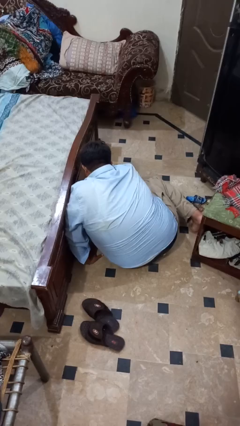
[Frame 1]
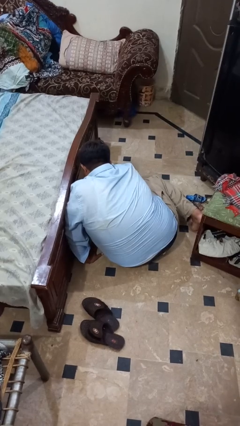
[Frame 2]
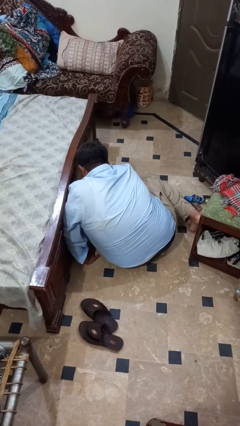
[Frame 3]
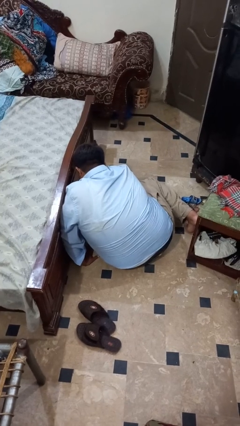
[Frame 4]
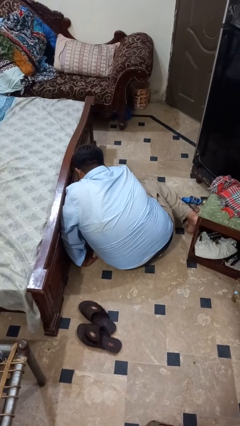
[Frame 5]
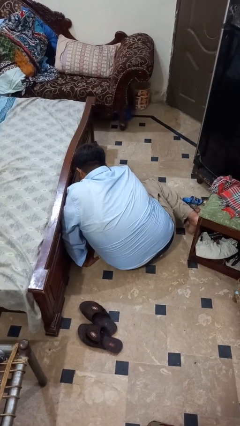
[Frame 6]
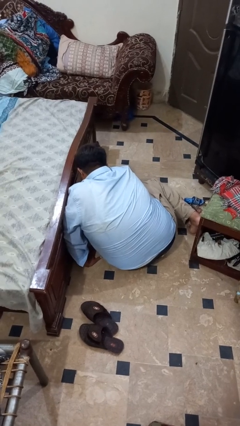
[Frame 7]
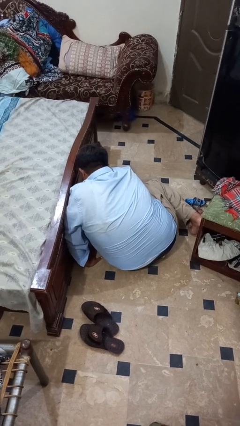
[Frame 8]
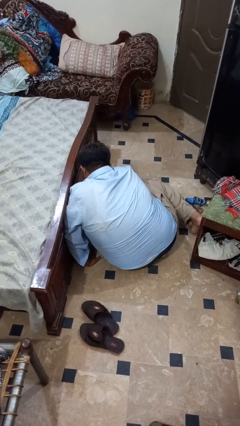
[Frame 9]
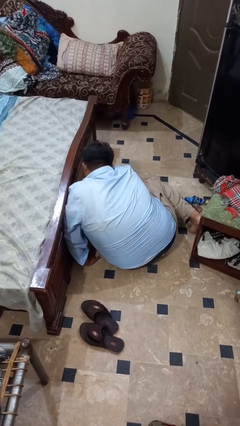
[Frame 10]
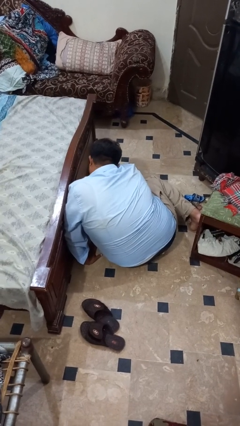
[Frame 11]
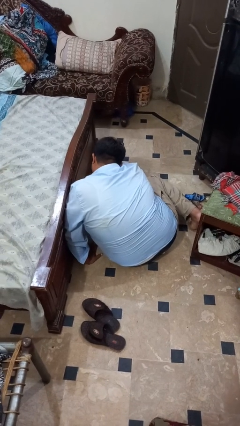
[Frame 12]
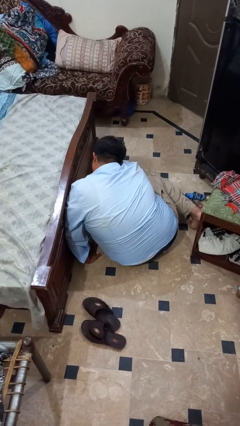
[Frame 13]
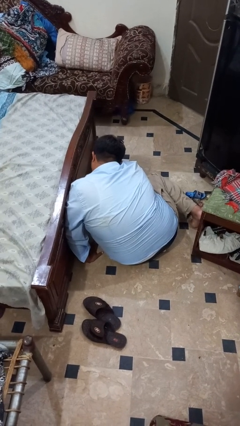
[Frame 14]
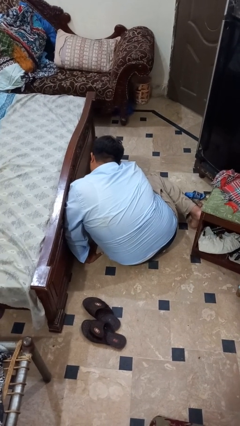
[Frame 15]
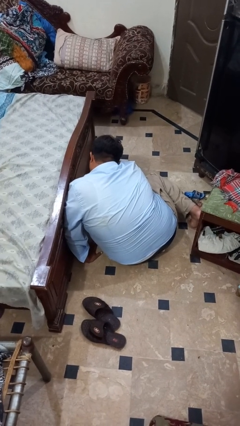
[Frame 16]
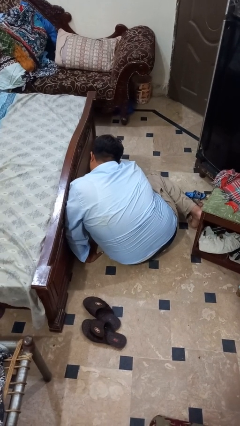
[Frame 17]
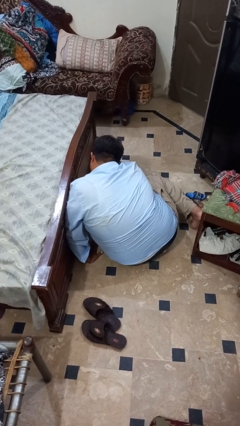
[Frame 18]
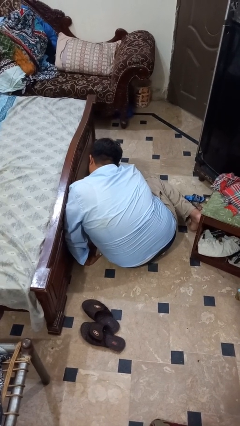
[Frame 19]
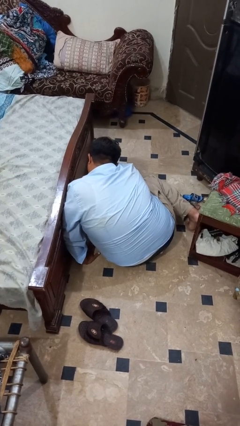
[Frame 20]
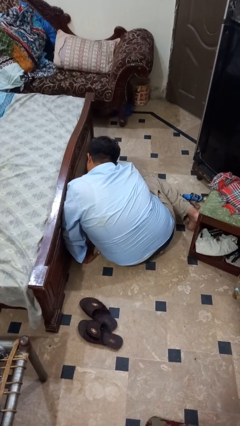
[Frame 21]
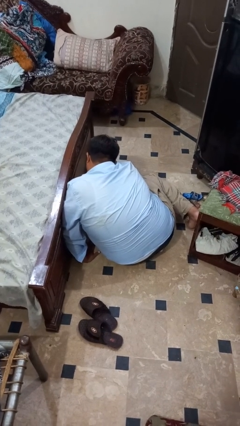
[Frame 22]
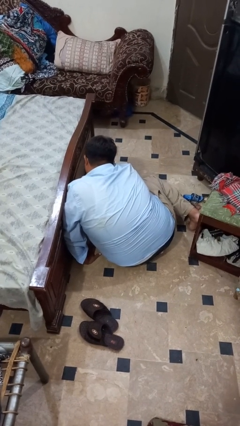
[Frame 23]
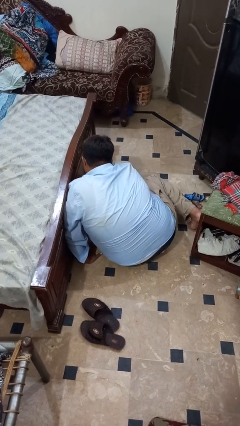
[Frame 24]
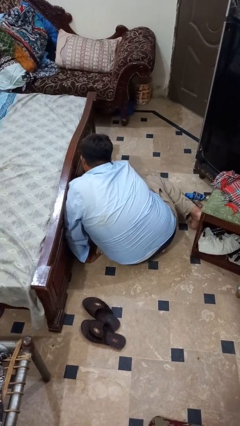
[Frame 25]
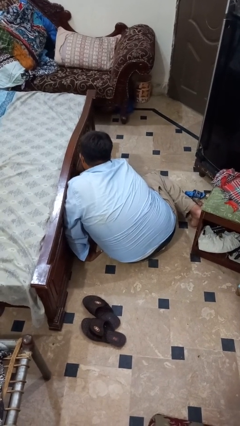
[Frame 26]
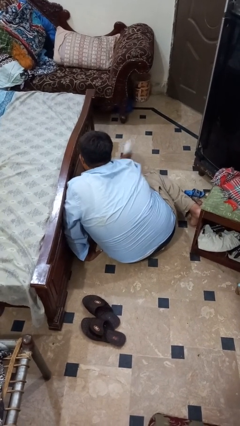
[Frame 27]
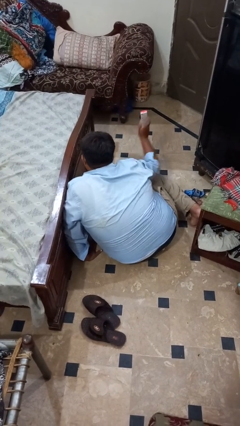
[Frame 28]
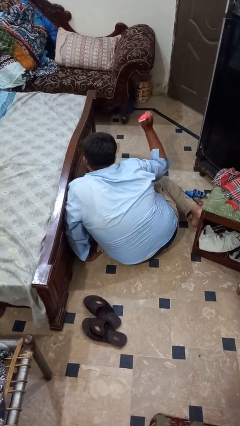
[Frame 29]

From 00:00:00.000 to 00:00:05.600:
person searches under bed

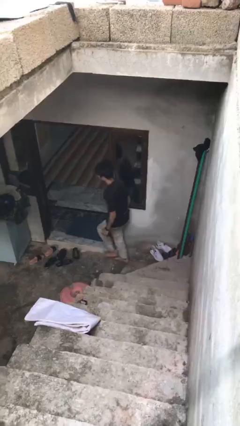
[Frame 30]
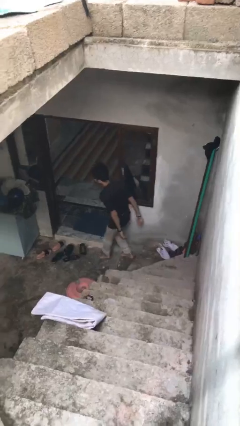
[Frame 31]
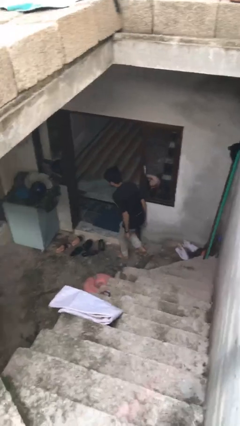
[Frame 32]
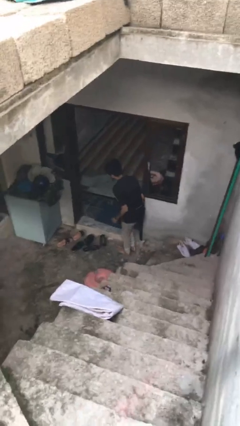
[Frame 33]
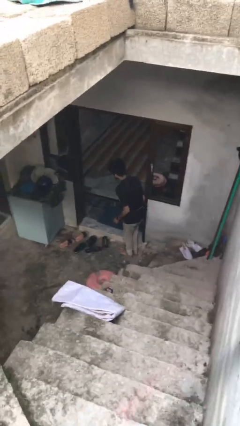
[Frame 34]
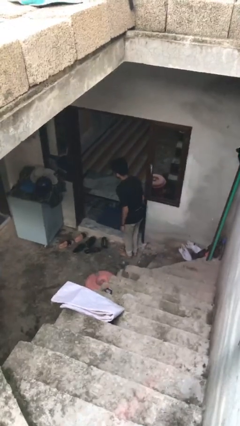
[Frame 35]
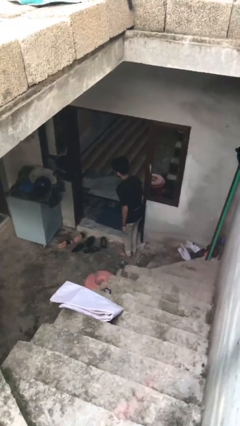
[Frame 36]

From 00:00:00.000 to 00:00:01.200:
person trips on stair

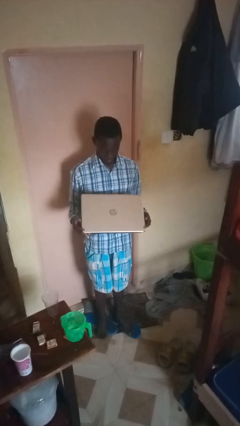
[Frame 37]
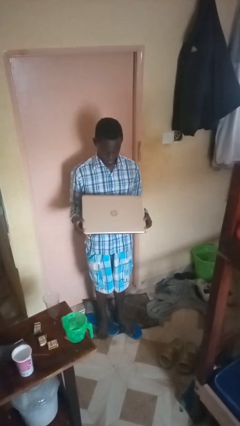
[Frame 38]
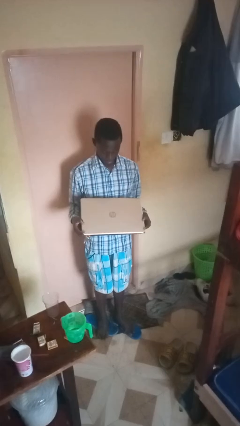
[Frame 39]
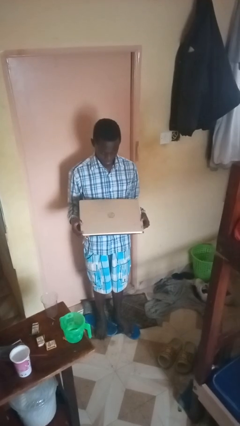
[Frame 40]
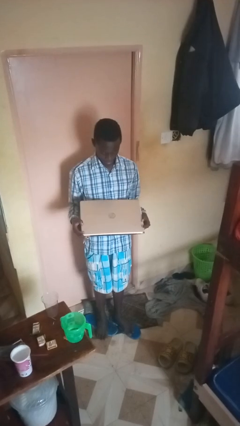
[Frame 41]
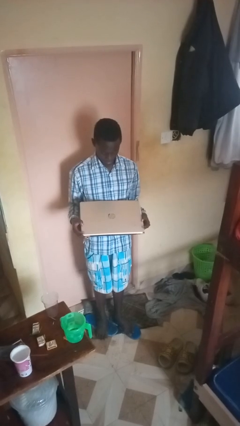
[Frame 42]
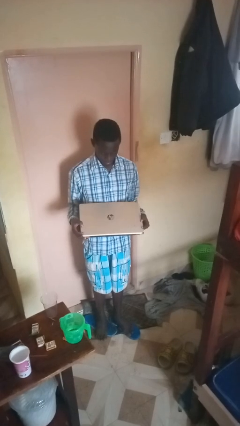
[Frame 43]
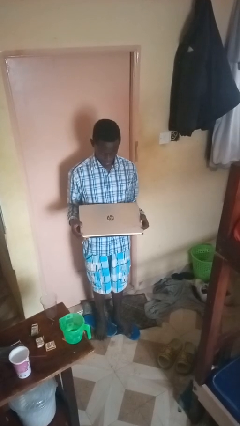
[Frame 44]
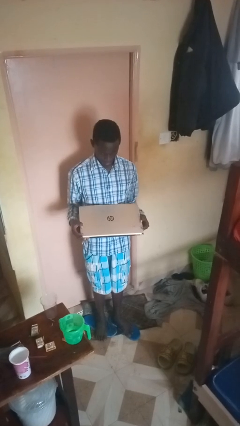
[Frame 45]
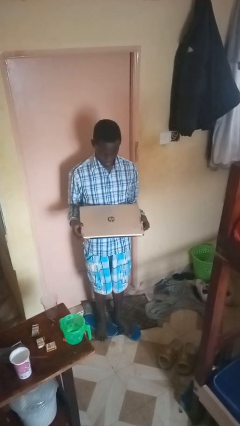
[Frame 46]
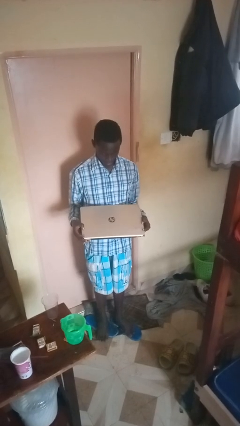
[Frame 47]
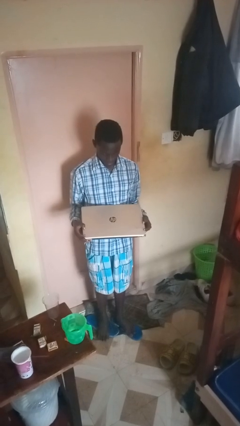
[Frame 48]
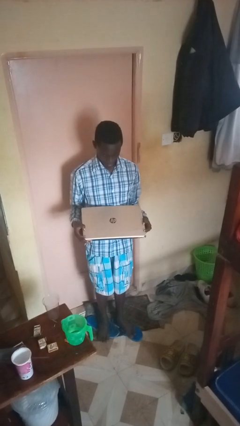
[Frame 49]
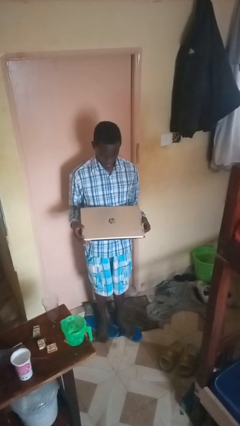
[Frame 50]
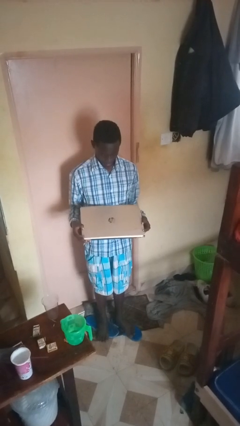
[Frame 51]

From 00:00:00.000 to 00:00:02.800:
person closes laptop

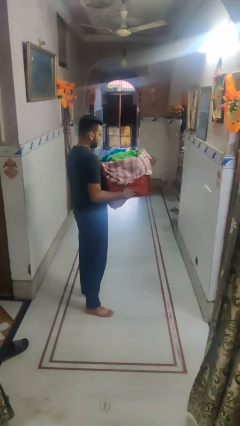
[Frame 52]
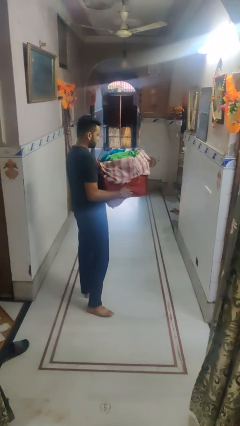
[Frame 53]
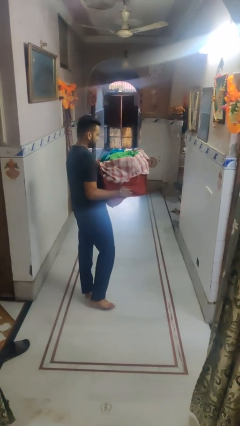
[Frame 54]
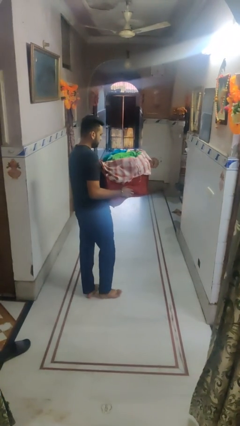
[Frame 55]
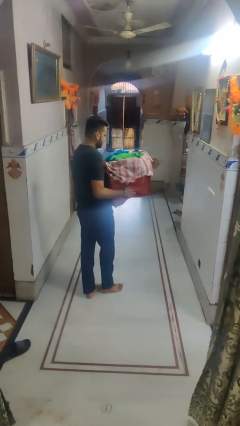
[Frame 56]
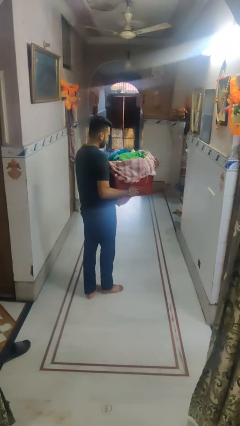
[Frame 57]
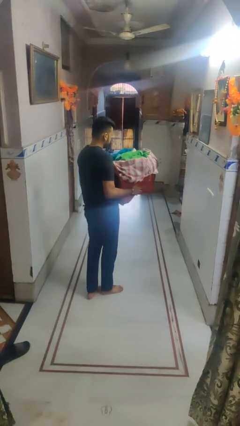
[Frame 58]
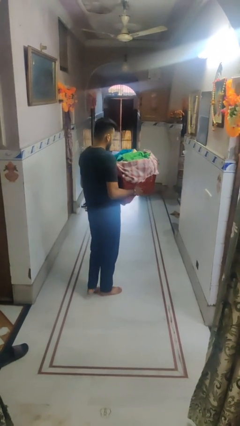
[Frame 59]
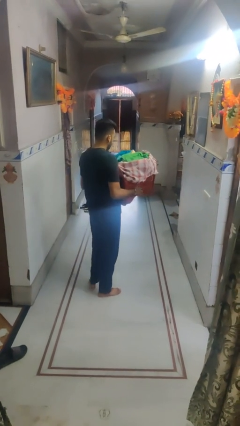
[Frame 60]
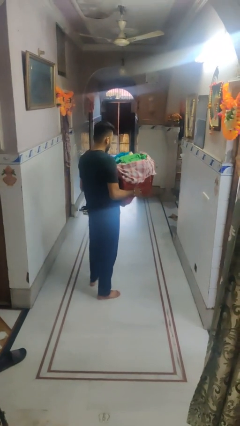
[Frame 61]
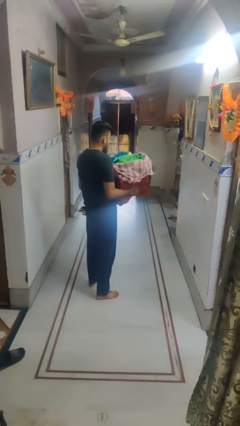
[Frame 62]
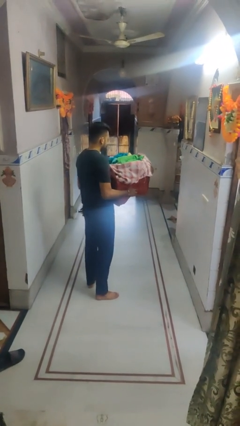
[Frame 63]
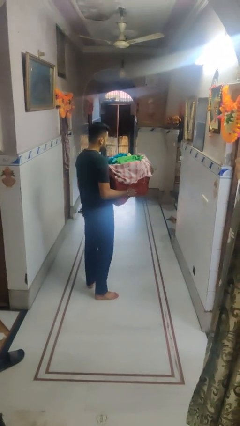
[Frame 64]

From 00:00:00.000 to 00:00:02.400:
person carries laundry basket

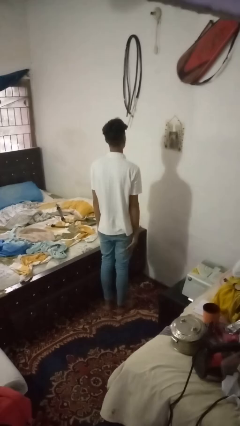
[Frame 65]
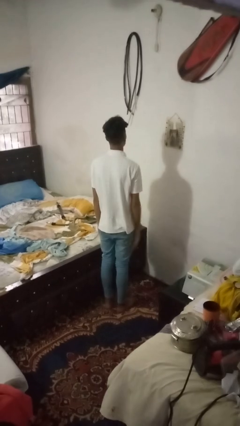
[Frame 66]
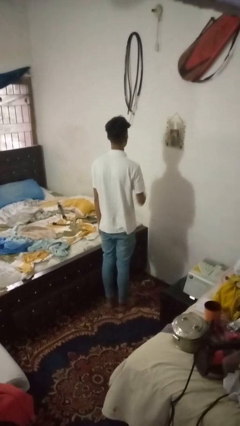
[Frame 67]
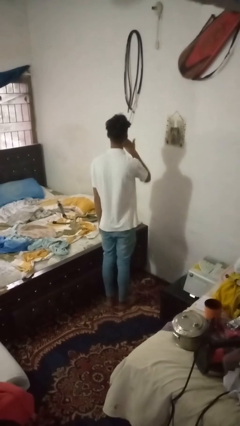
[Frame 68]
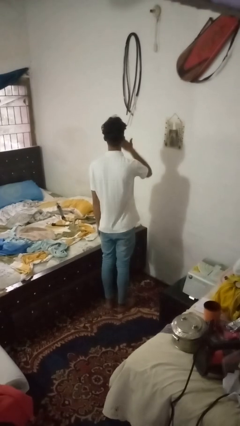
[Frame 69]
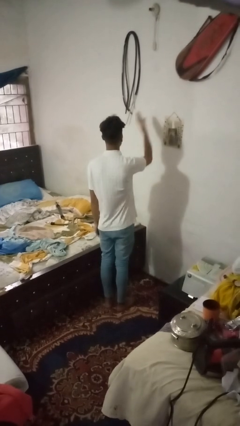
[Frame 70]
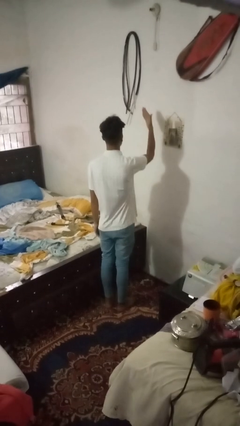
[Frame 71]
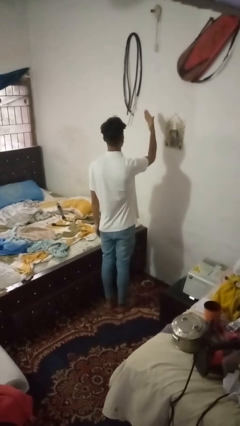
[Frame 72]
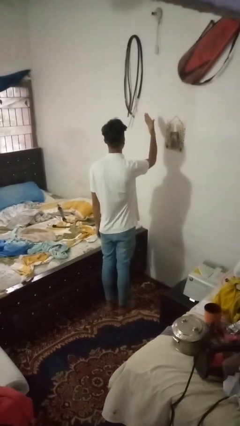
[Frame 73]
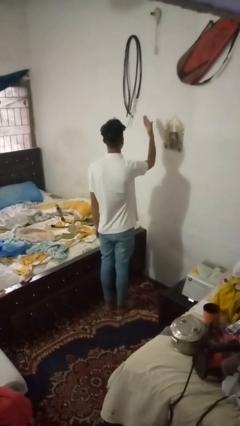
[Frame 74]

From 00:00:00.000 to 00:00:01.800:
person gestures blow kiss

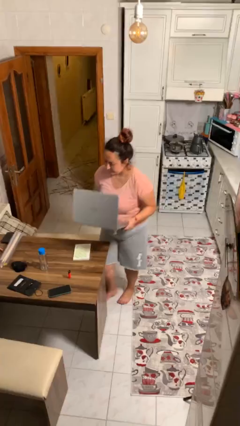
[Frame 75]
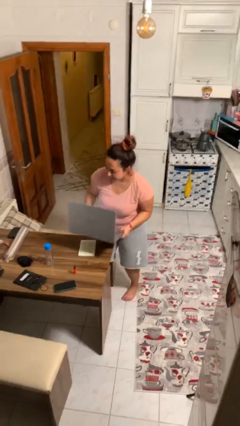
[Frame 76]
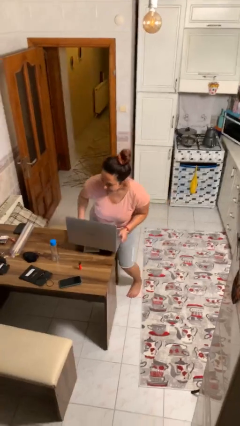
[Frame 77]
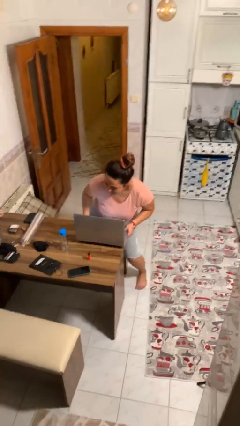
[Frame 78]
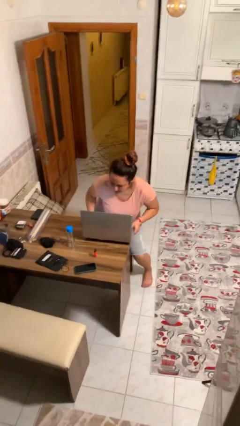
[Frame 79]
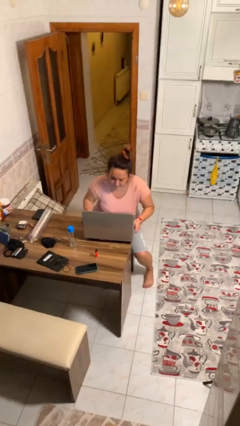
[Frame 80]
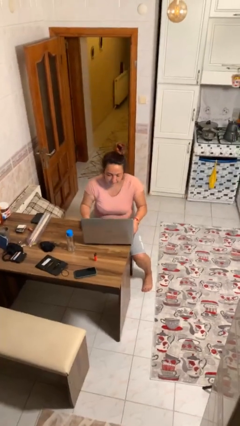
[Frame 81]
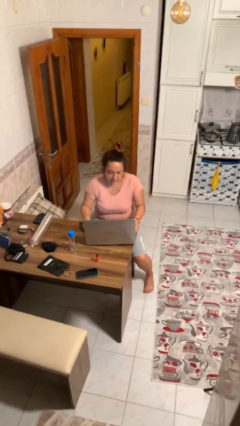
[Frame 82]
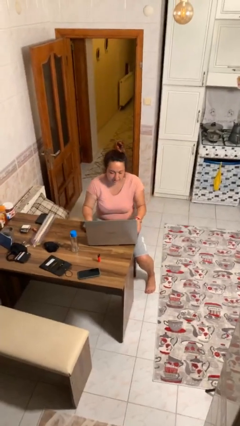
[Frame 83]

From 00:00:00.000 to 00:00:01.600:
person sits down

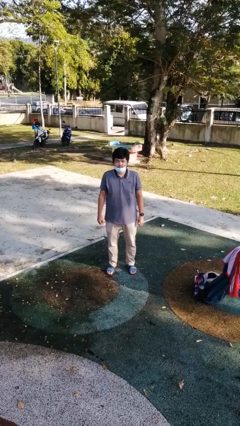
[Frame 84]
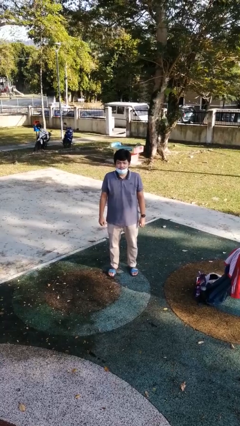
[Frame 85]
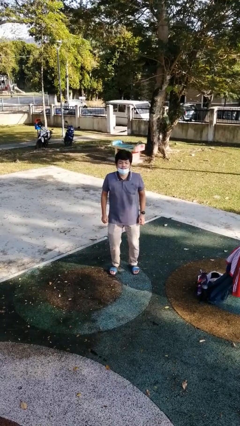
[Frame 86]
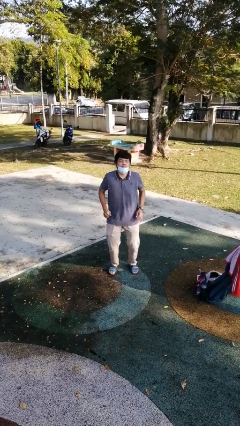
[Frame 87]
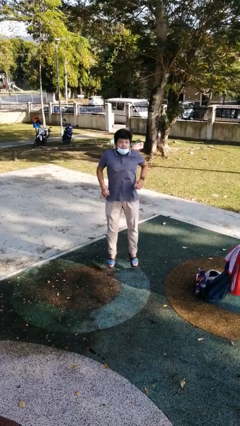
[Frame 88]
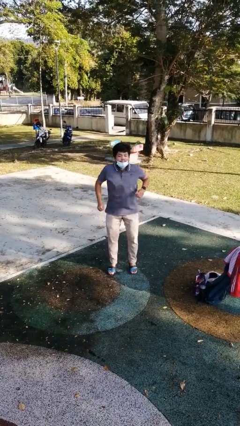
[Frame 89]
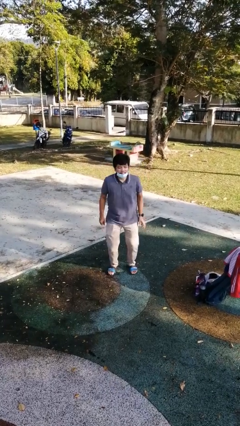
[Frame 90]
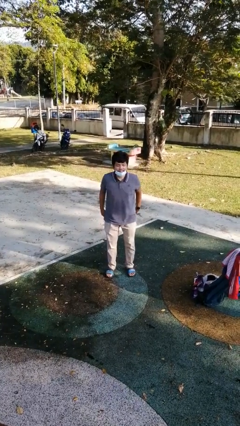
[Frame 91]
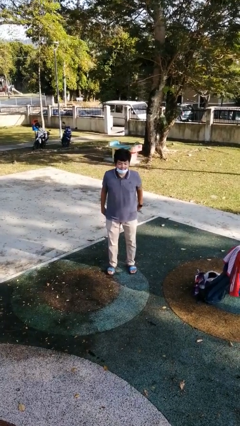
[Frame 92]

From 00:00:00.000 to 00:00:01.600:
person jumps
